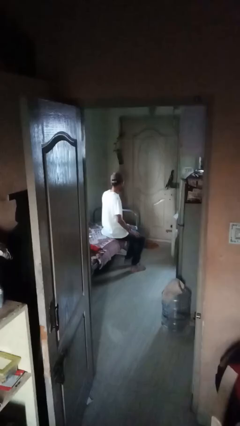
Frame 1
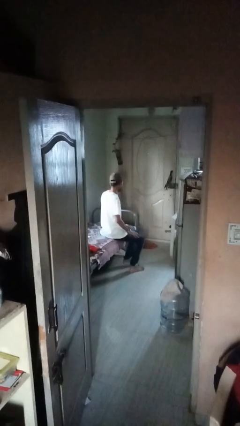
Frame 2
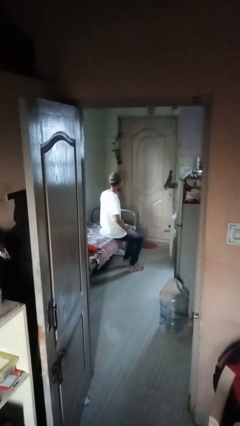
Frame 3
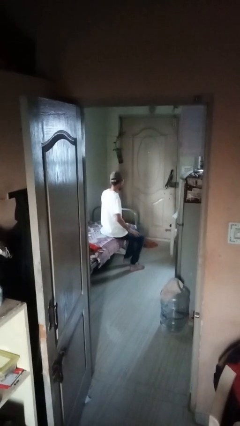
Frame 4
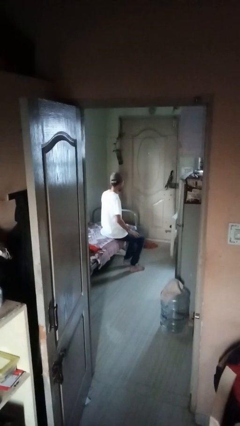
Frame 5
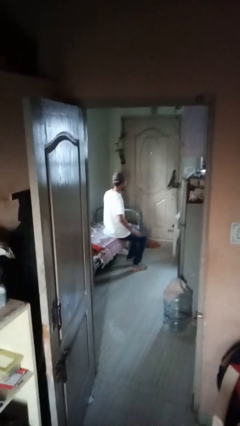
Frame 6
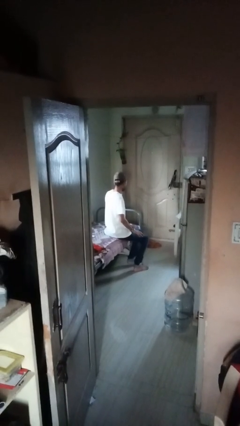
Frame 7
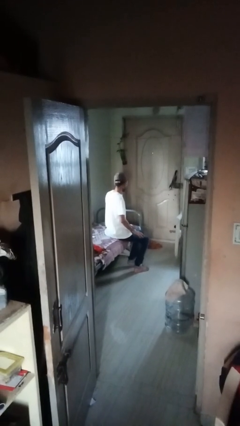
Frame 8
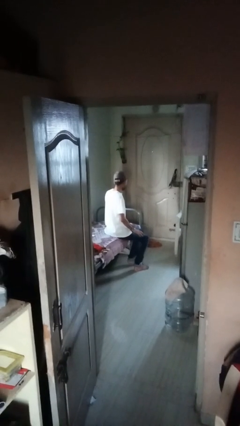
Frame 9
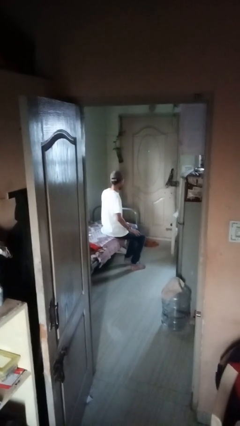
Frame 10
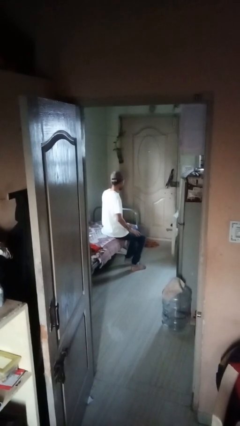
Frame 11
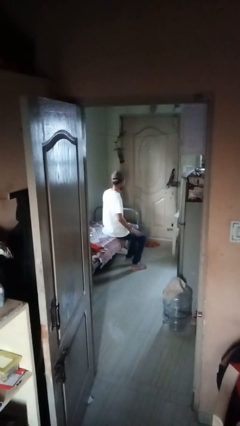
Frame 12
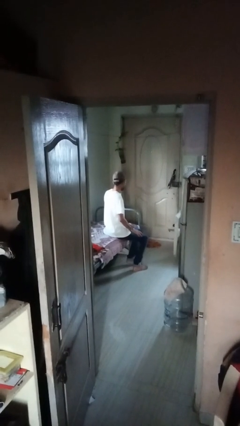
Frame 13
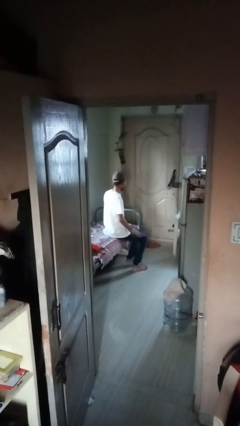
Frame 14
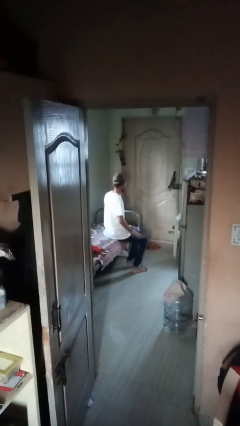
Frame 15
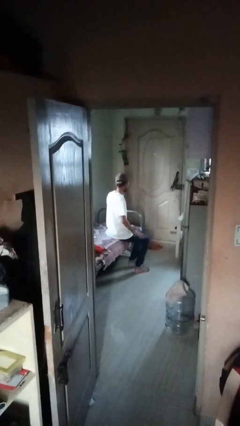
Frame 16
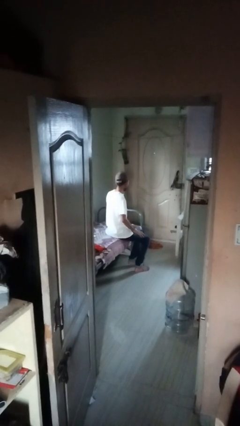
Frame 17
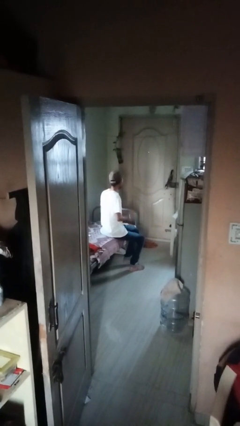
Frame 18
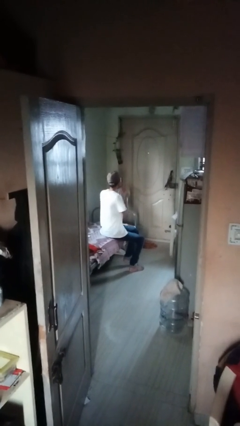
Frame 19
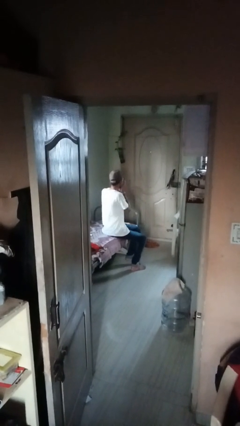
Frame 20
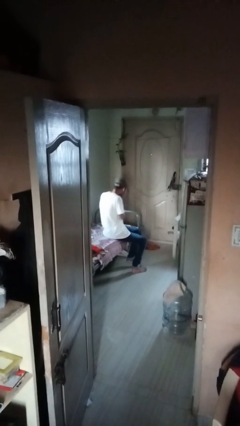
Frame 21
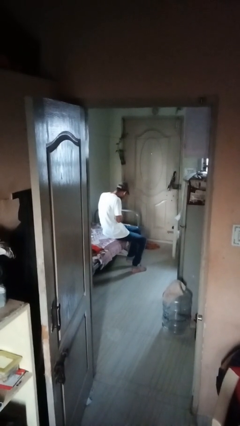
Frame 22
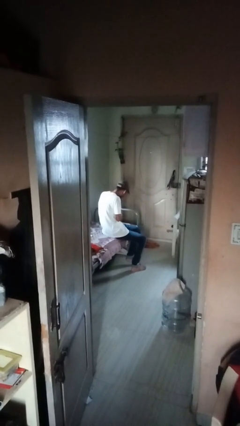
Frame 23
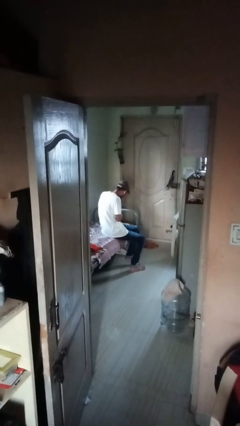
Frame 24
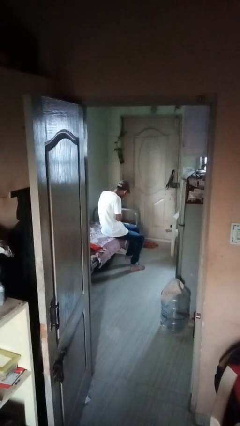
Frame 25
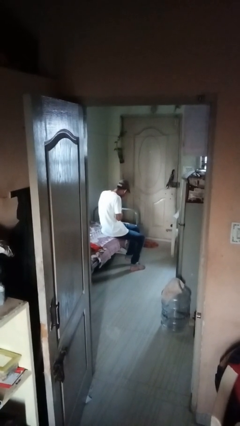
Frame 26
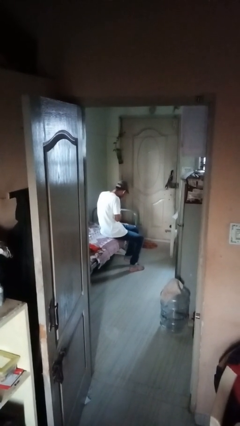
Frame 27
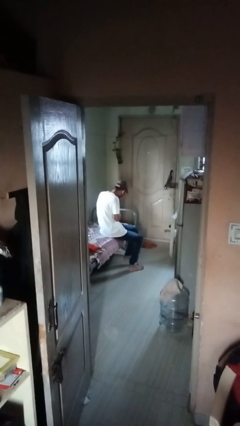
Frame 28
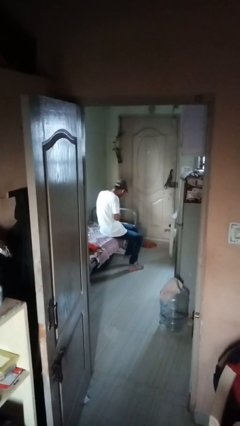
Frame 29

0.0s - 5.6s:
person sneezes into hand

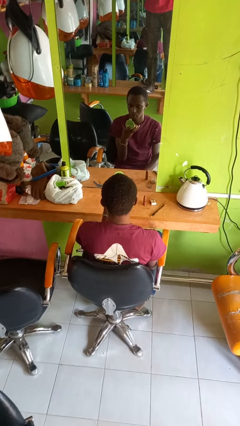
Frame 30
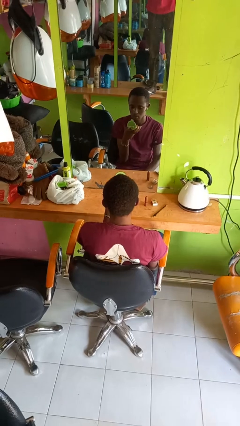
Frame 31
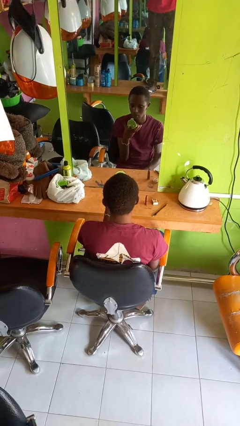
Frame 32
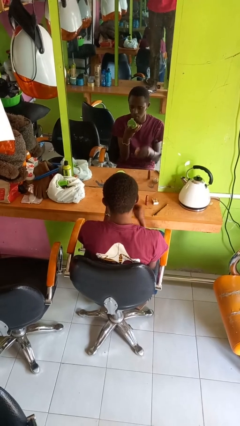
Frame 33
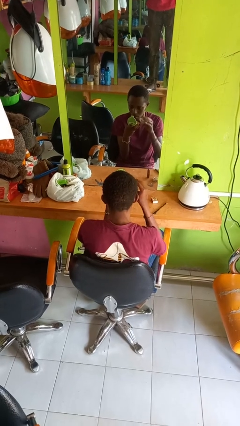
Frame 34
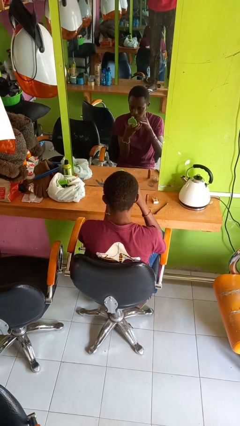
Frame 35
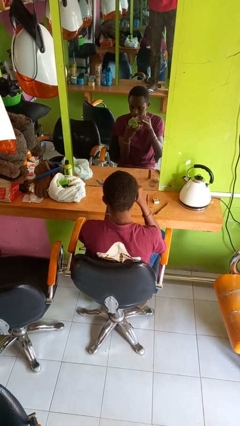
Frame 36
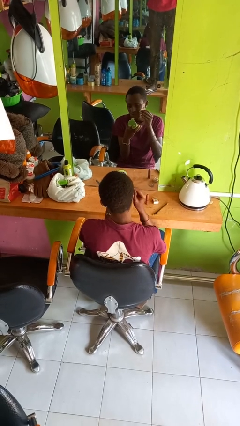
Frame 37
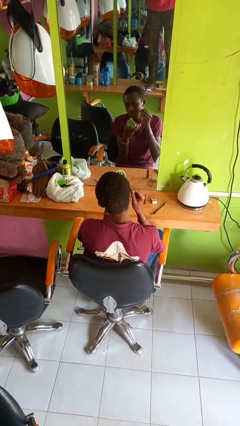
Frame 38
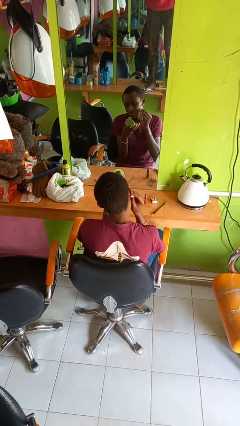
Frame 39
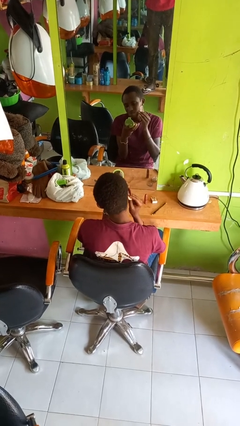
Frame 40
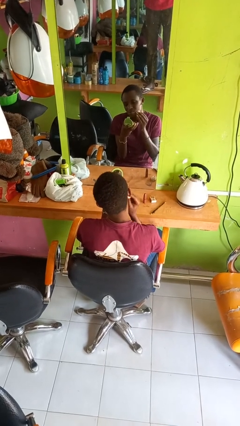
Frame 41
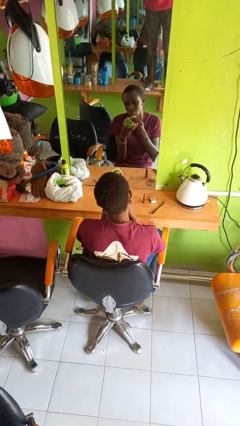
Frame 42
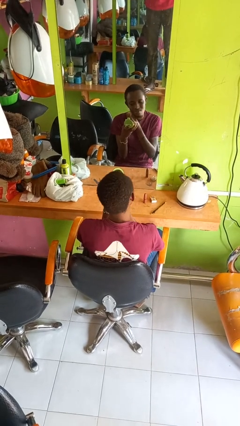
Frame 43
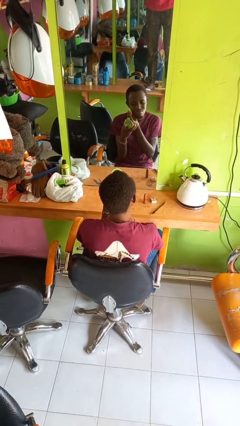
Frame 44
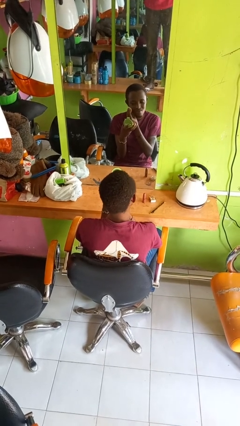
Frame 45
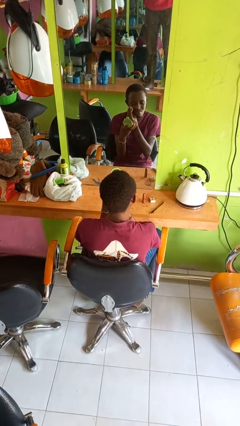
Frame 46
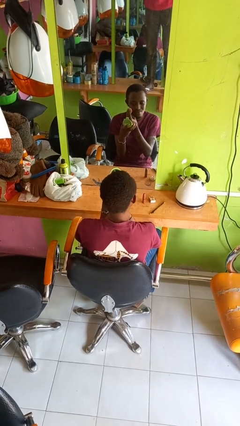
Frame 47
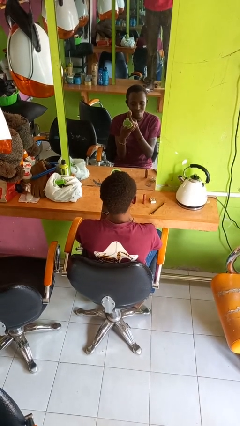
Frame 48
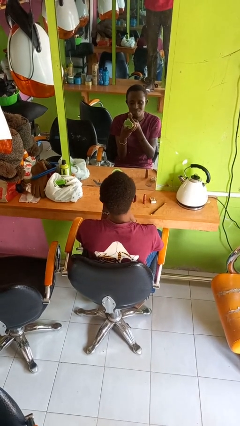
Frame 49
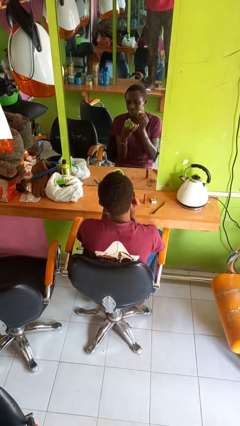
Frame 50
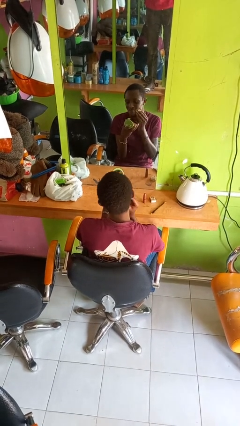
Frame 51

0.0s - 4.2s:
person applies foundation makeup

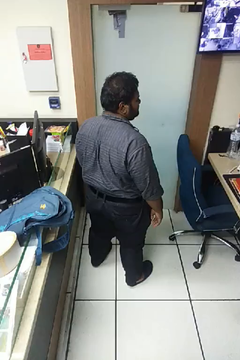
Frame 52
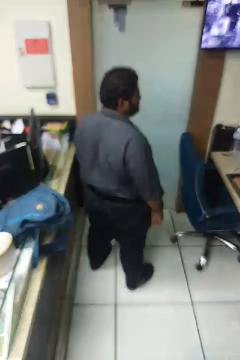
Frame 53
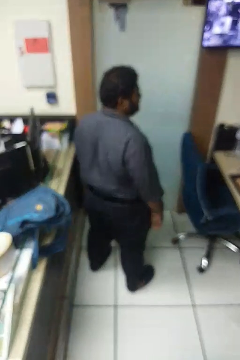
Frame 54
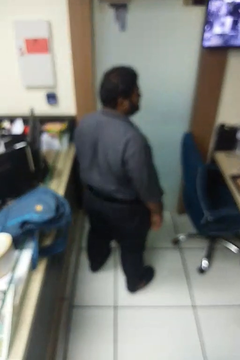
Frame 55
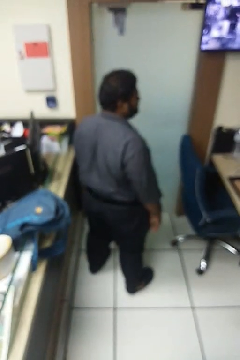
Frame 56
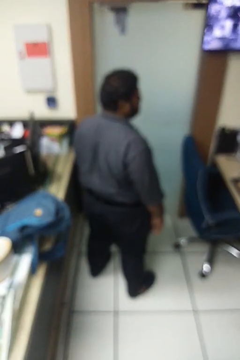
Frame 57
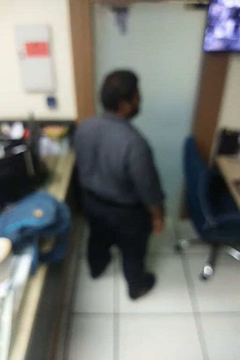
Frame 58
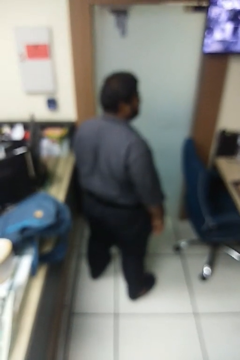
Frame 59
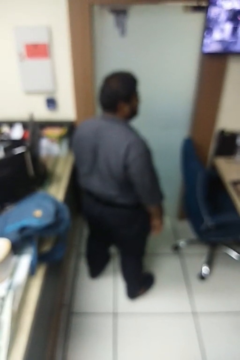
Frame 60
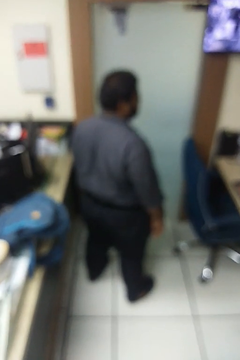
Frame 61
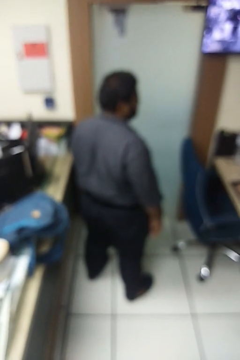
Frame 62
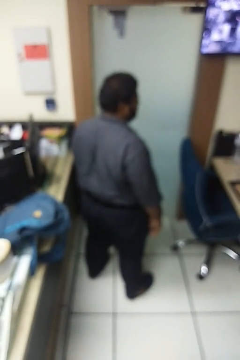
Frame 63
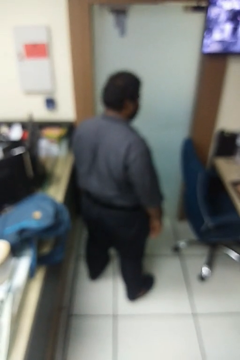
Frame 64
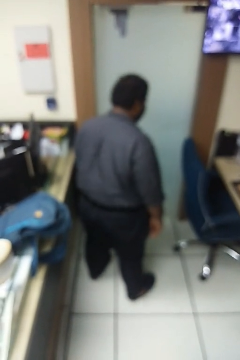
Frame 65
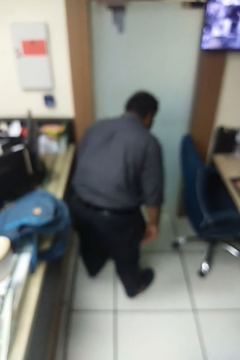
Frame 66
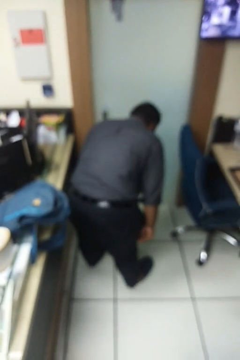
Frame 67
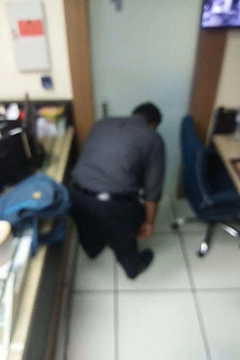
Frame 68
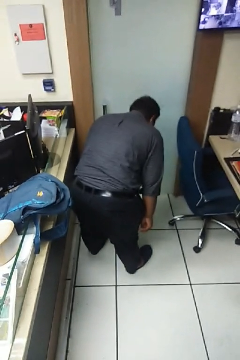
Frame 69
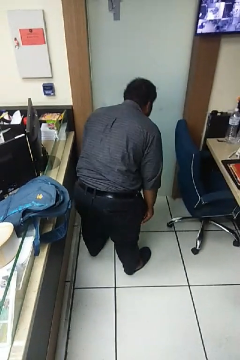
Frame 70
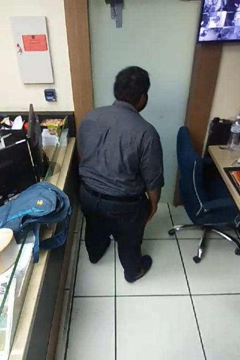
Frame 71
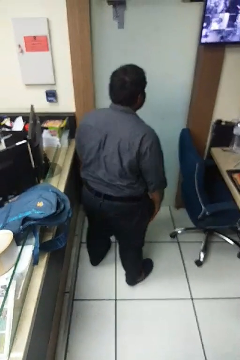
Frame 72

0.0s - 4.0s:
person bows

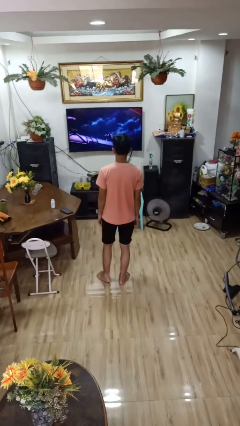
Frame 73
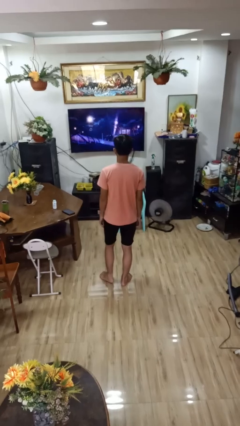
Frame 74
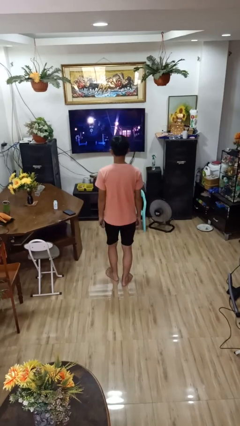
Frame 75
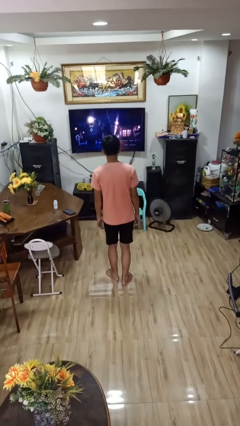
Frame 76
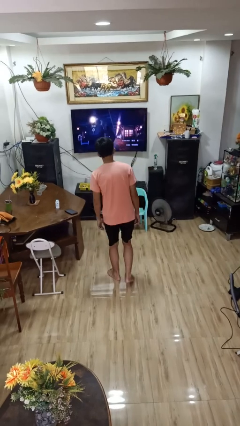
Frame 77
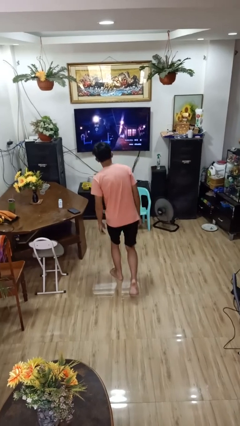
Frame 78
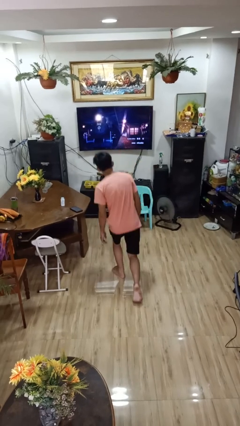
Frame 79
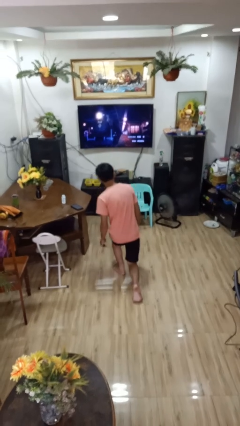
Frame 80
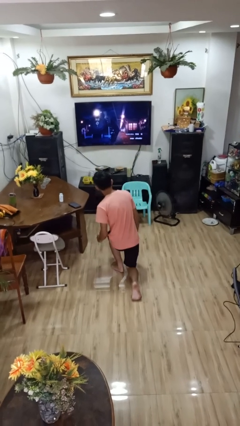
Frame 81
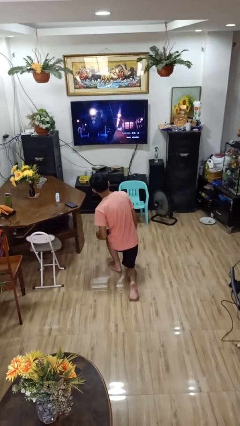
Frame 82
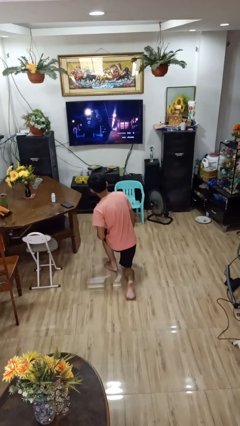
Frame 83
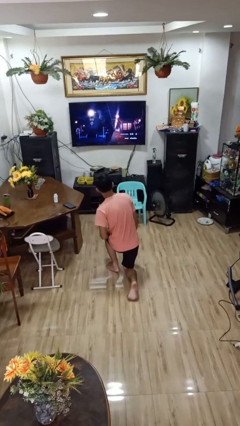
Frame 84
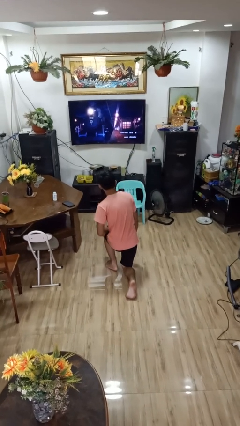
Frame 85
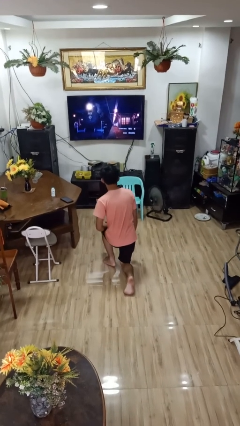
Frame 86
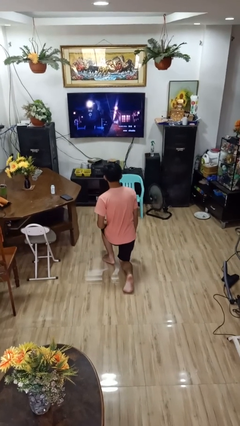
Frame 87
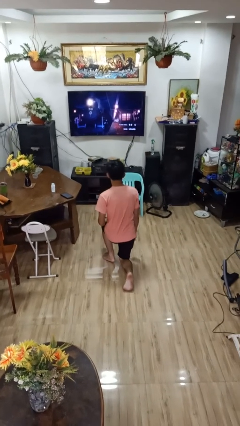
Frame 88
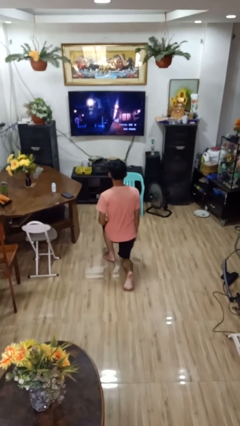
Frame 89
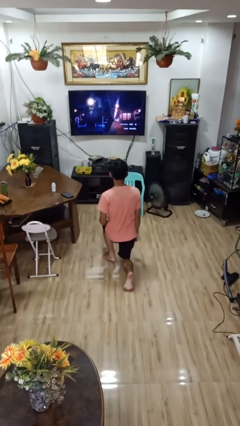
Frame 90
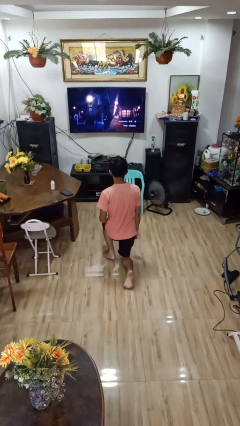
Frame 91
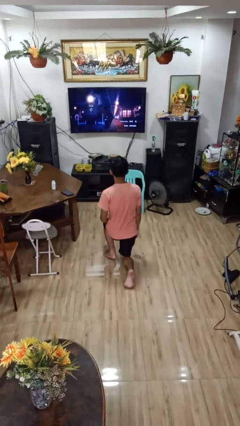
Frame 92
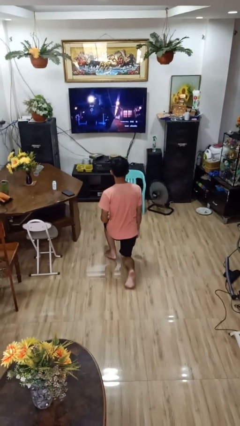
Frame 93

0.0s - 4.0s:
person kneels

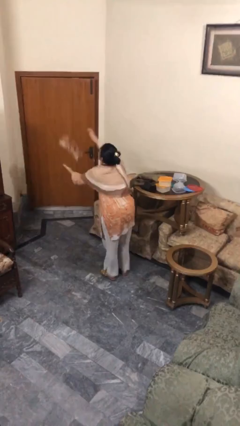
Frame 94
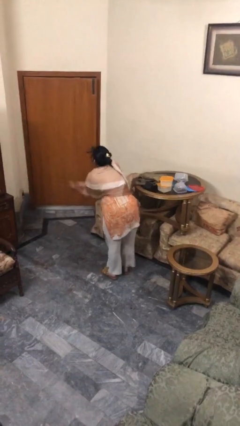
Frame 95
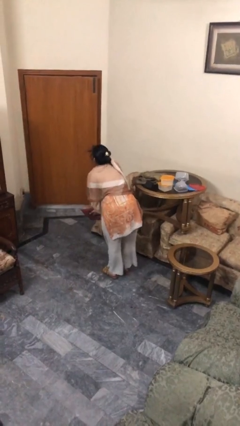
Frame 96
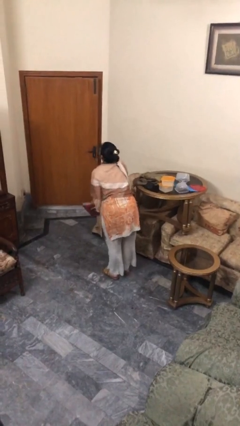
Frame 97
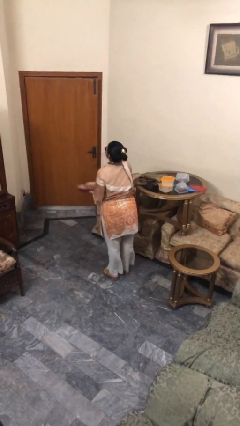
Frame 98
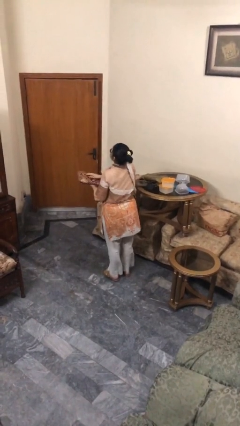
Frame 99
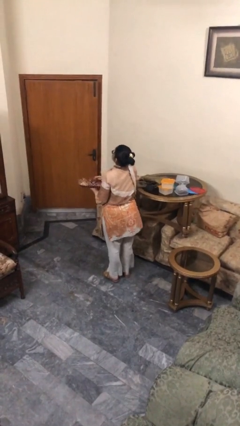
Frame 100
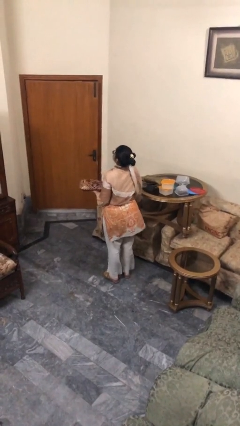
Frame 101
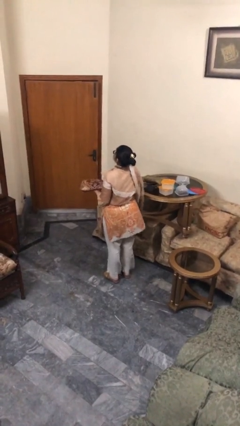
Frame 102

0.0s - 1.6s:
person catches dropped object
